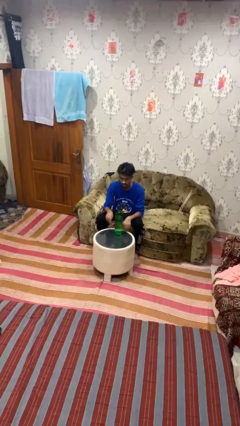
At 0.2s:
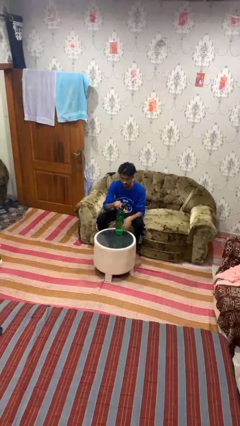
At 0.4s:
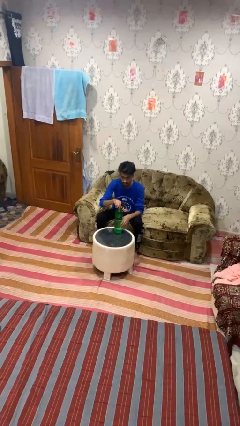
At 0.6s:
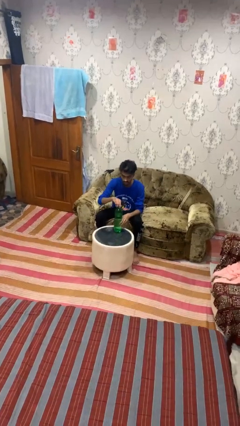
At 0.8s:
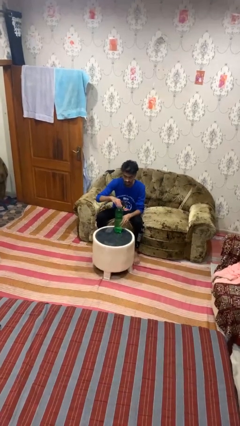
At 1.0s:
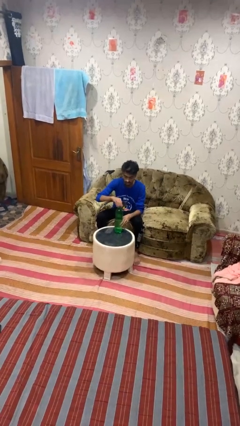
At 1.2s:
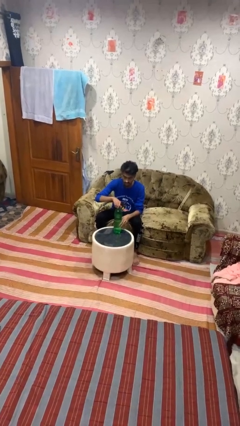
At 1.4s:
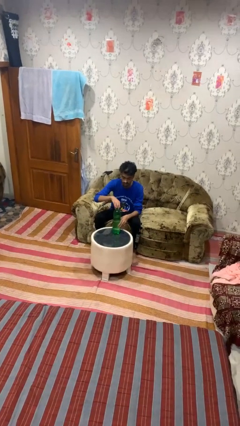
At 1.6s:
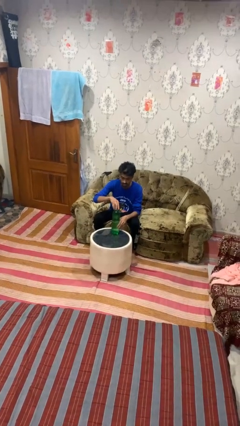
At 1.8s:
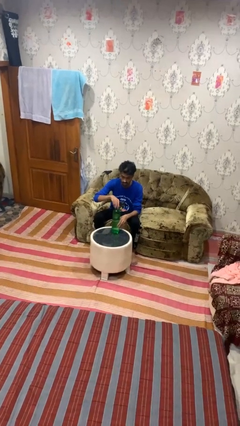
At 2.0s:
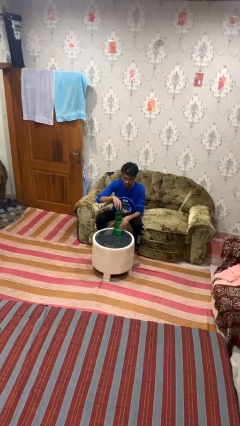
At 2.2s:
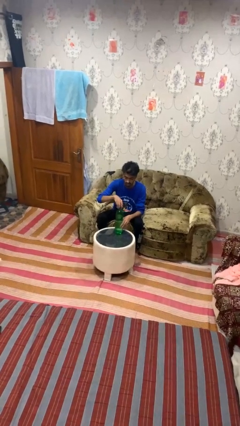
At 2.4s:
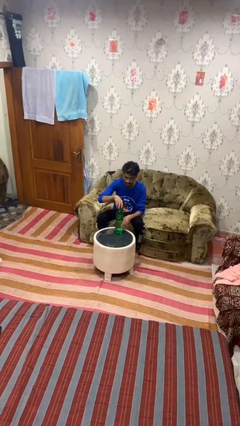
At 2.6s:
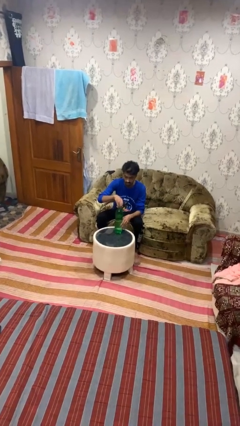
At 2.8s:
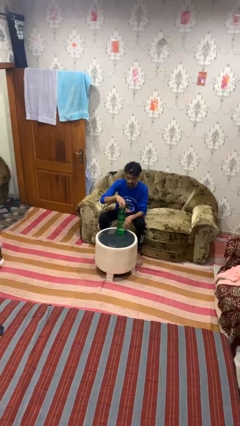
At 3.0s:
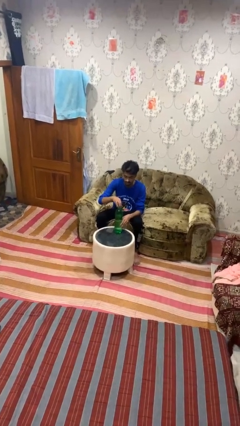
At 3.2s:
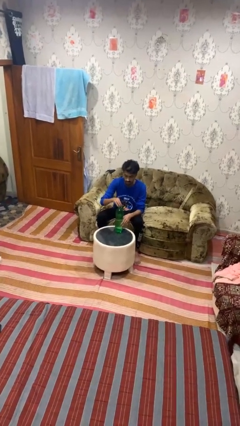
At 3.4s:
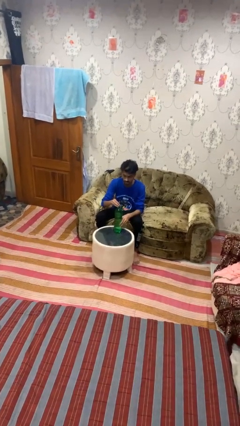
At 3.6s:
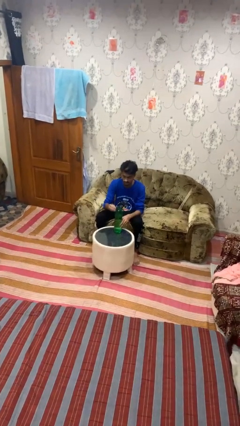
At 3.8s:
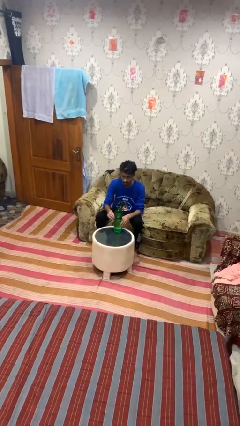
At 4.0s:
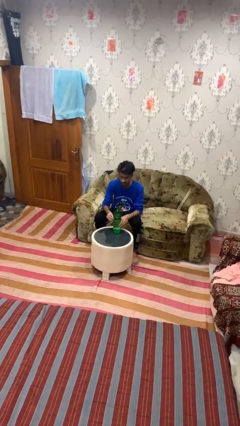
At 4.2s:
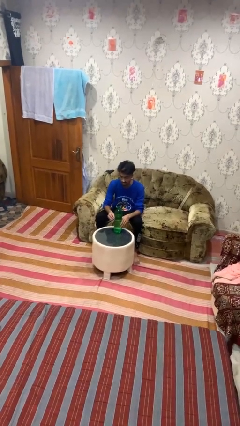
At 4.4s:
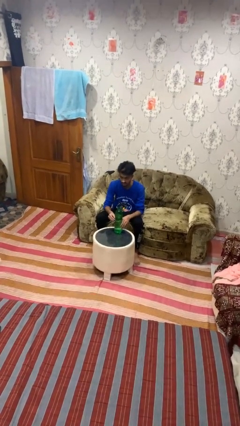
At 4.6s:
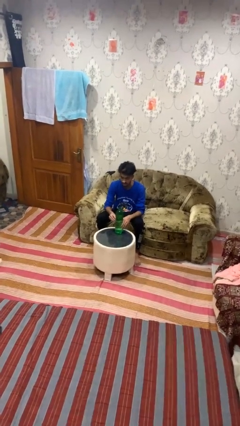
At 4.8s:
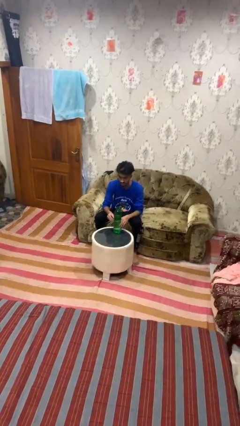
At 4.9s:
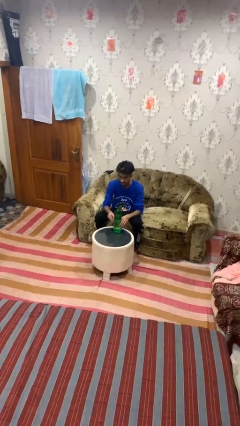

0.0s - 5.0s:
person unscrews lid from bottle

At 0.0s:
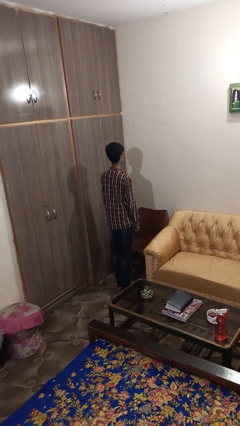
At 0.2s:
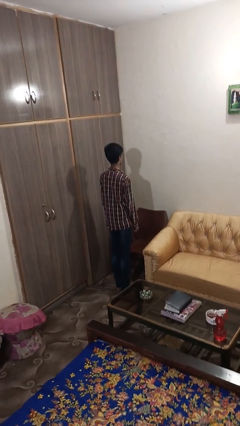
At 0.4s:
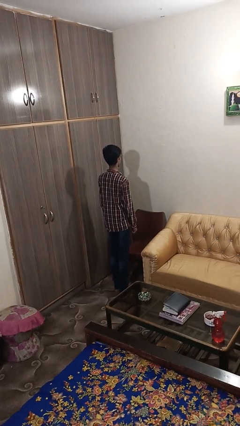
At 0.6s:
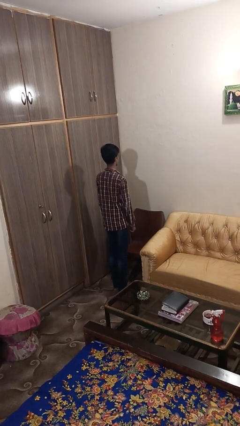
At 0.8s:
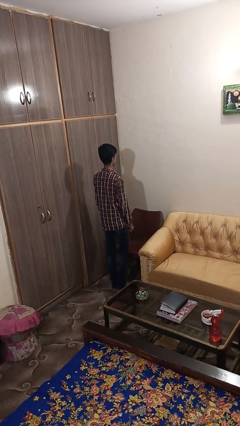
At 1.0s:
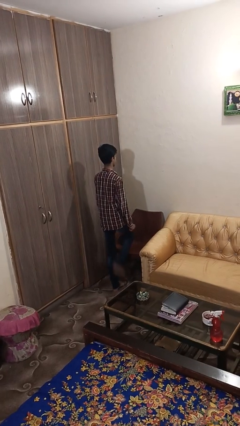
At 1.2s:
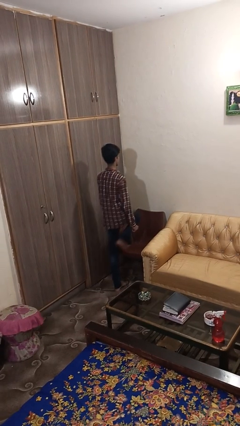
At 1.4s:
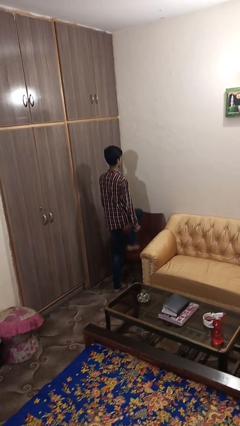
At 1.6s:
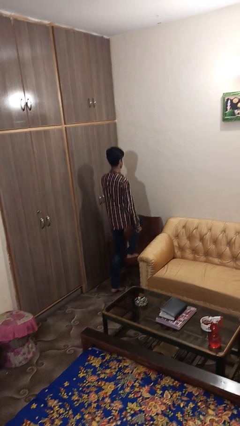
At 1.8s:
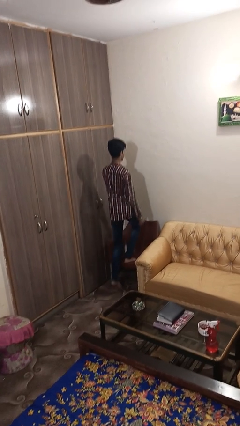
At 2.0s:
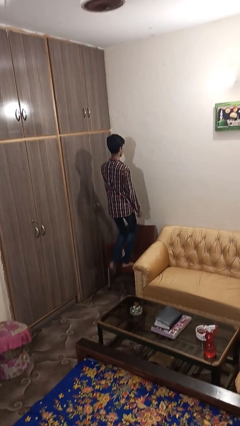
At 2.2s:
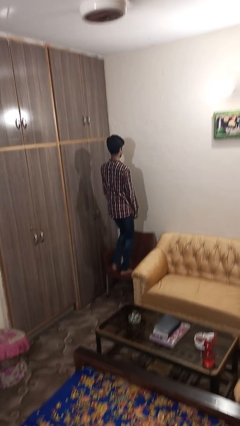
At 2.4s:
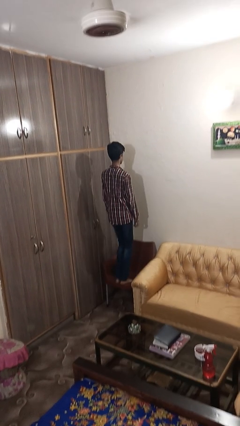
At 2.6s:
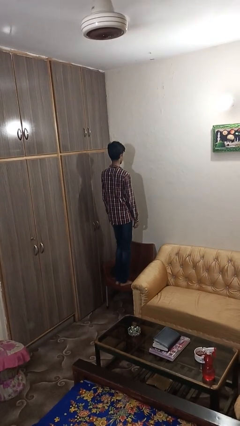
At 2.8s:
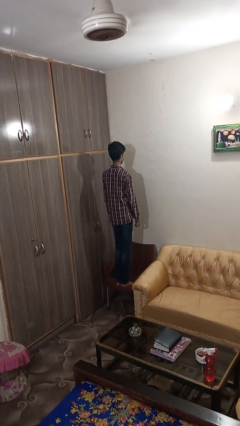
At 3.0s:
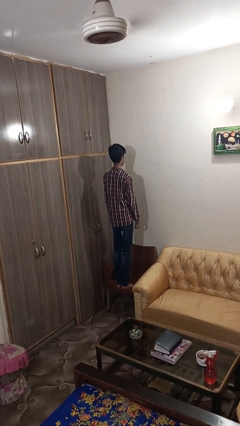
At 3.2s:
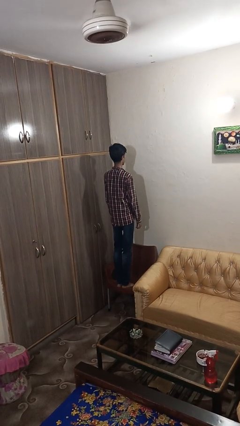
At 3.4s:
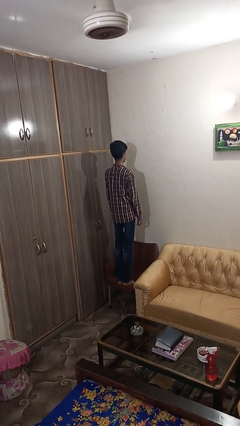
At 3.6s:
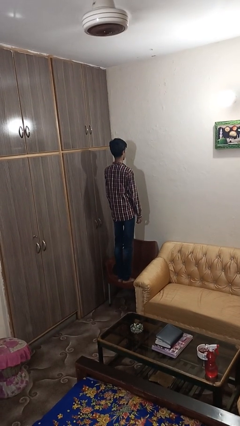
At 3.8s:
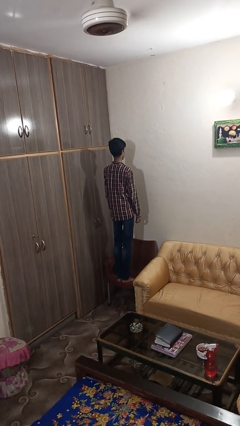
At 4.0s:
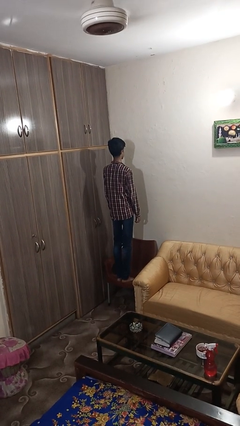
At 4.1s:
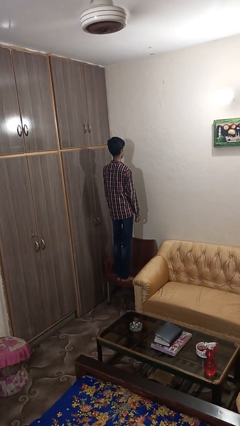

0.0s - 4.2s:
person climbs on chair

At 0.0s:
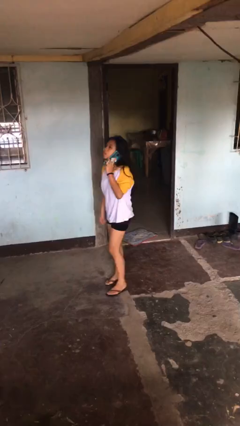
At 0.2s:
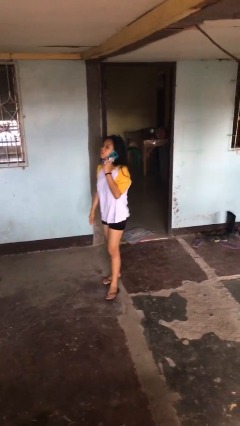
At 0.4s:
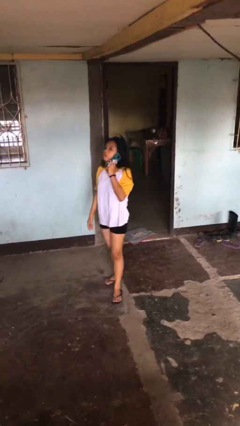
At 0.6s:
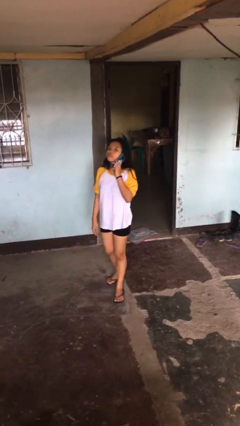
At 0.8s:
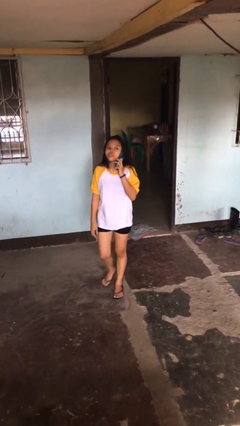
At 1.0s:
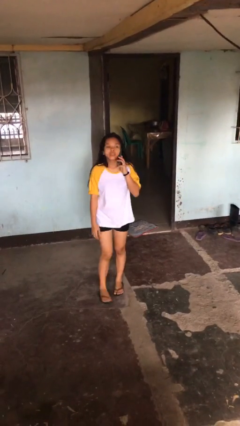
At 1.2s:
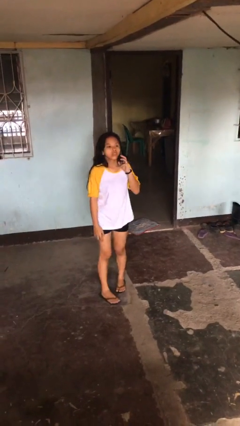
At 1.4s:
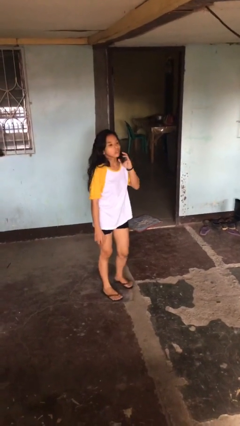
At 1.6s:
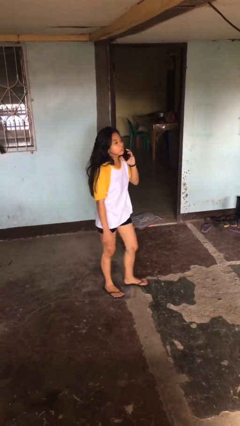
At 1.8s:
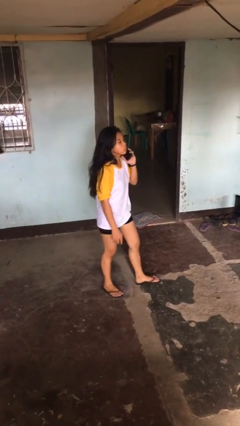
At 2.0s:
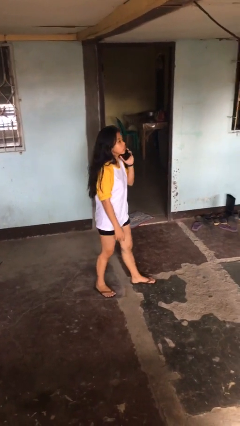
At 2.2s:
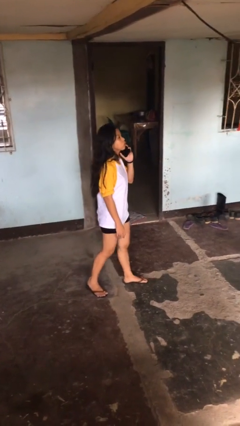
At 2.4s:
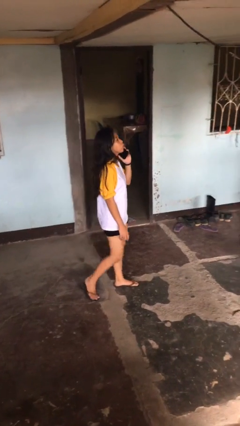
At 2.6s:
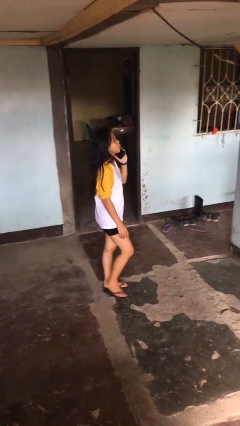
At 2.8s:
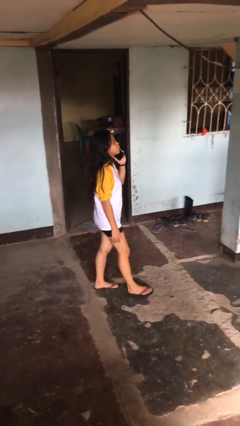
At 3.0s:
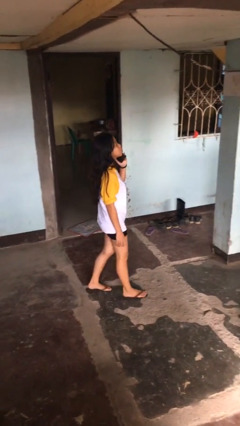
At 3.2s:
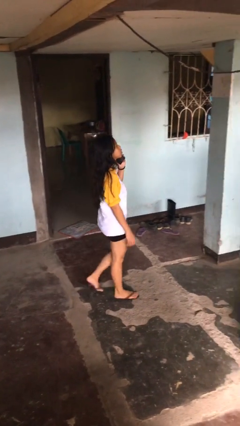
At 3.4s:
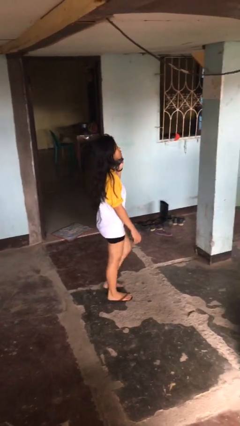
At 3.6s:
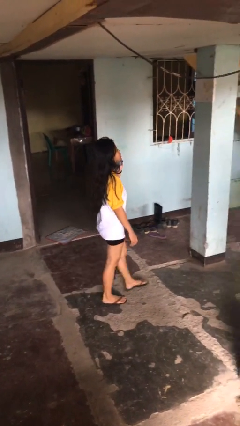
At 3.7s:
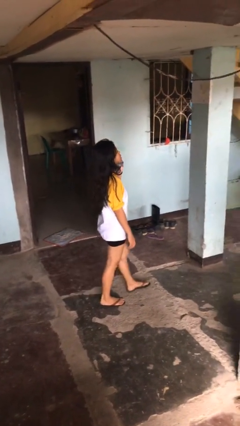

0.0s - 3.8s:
person talks on phone

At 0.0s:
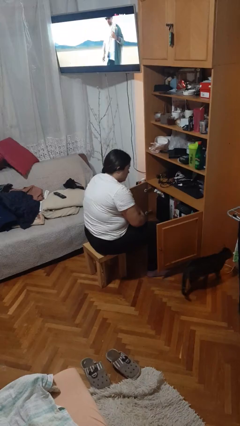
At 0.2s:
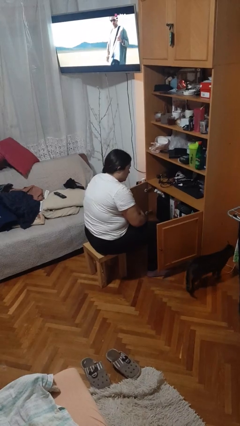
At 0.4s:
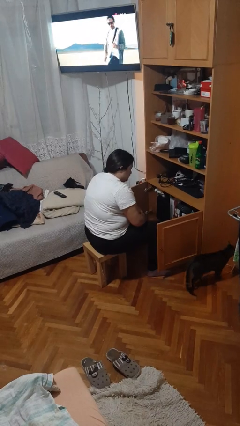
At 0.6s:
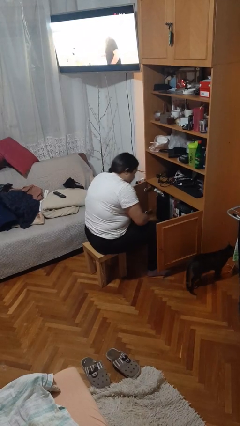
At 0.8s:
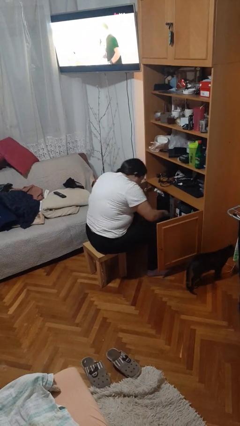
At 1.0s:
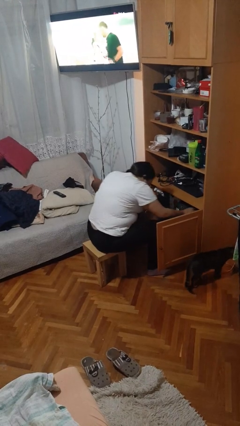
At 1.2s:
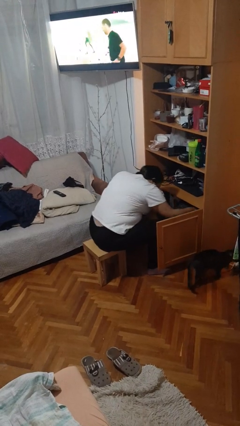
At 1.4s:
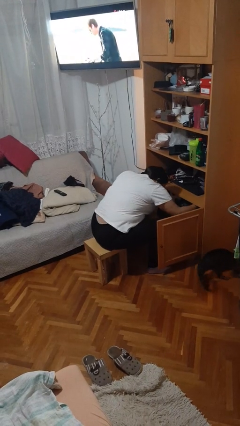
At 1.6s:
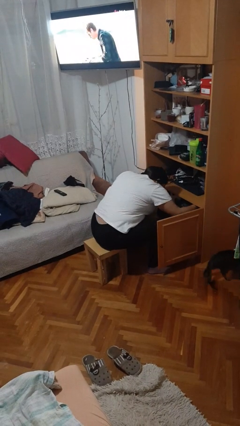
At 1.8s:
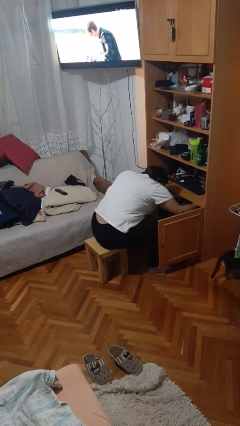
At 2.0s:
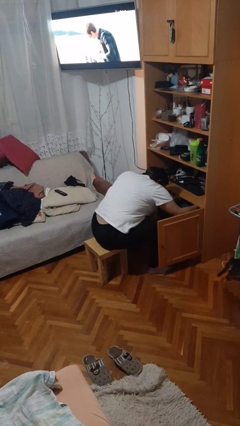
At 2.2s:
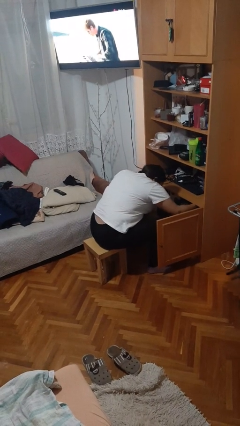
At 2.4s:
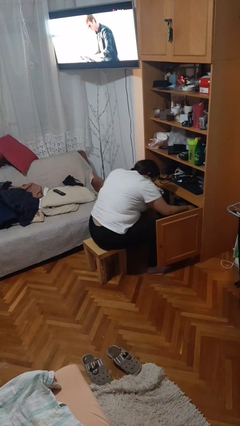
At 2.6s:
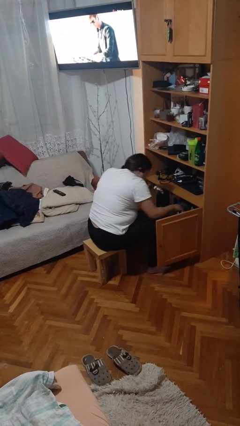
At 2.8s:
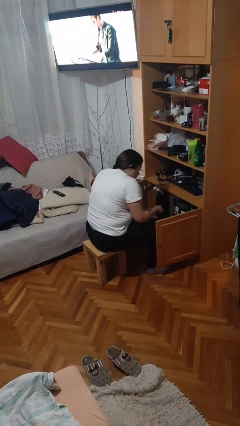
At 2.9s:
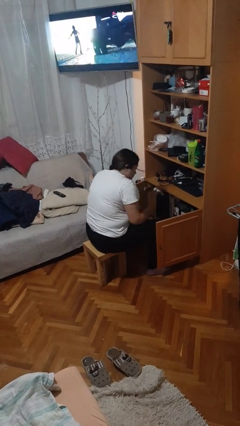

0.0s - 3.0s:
person searches in cabinet

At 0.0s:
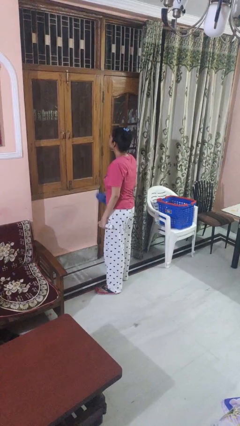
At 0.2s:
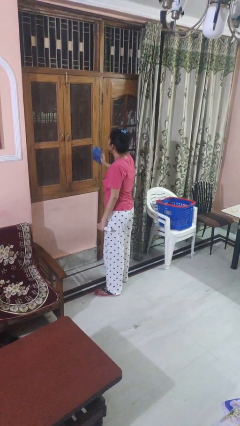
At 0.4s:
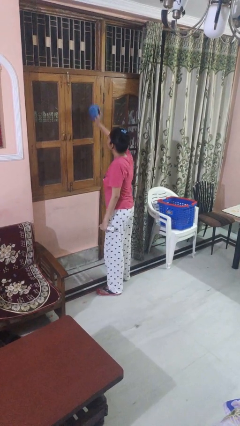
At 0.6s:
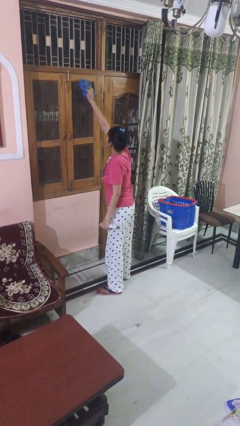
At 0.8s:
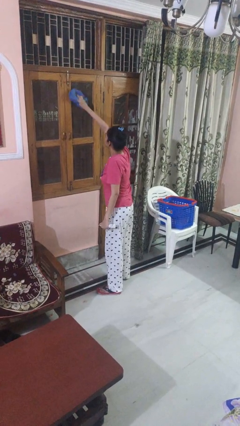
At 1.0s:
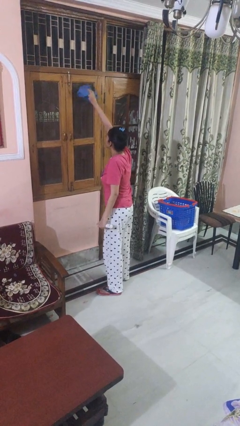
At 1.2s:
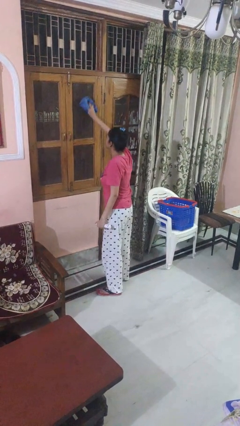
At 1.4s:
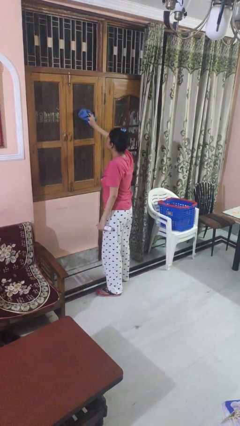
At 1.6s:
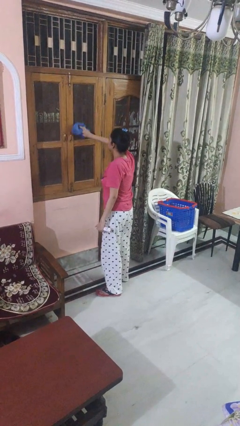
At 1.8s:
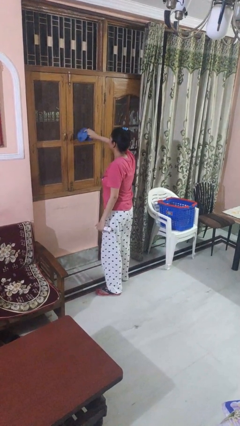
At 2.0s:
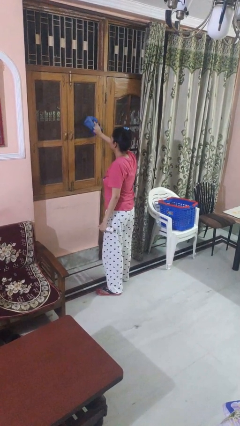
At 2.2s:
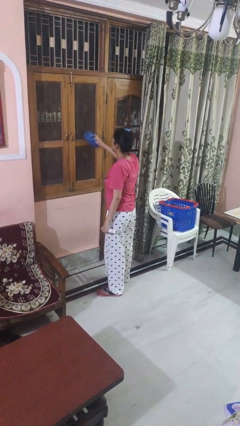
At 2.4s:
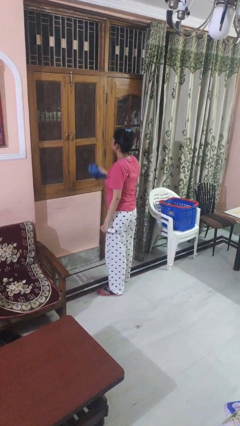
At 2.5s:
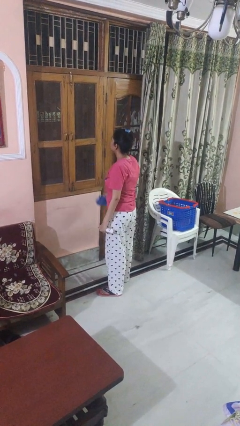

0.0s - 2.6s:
person washes window
